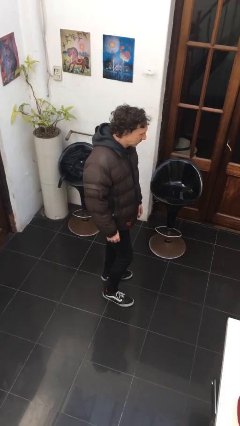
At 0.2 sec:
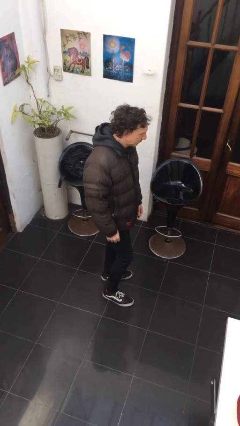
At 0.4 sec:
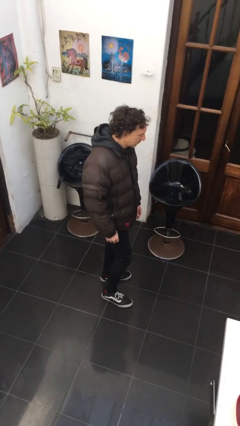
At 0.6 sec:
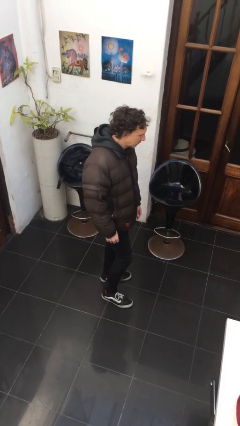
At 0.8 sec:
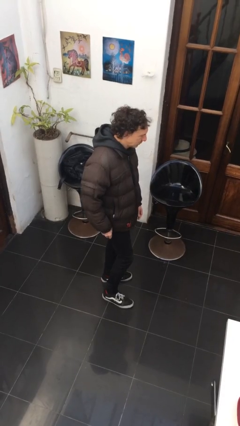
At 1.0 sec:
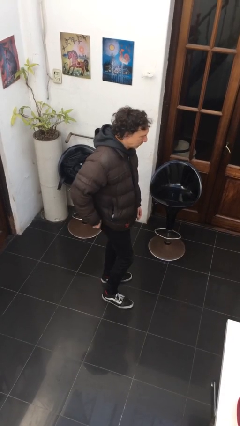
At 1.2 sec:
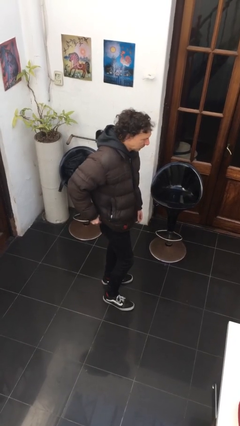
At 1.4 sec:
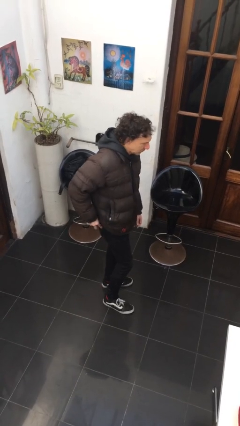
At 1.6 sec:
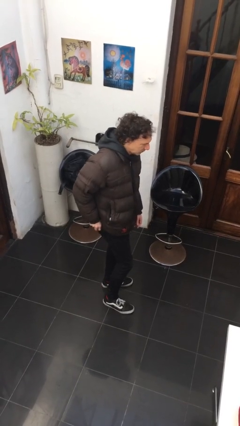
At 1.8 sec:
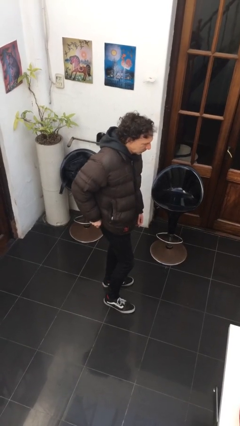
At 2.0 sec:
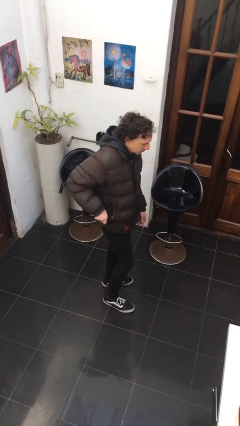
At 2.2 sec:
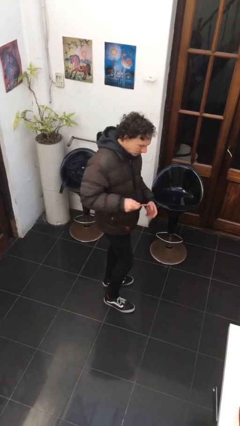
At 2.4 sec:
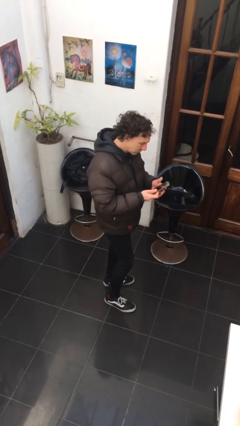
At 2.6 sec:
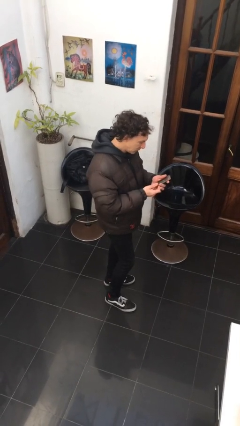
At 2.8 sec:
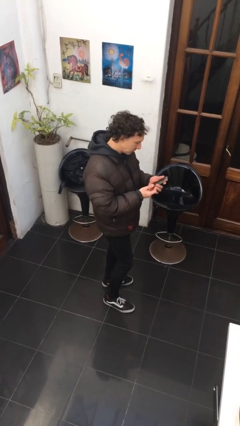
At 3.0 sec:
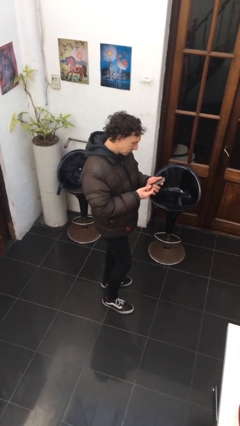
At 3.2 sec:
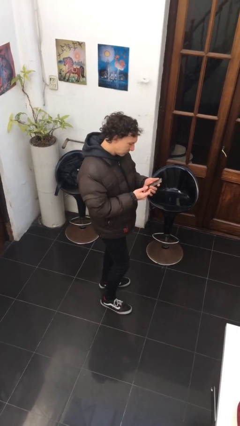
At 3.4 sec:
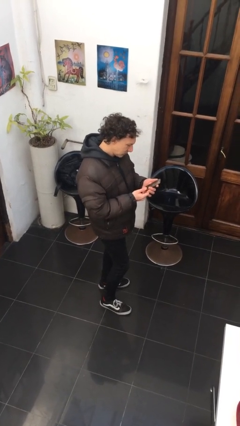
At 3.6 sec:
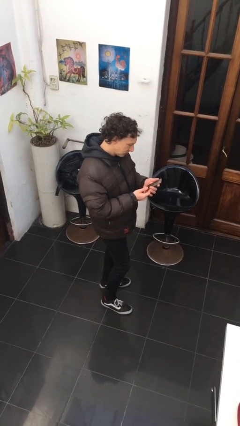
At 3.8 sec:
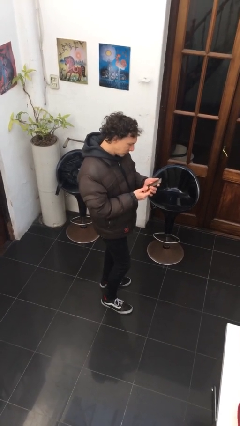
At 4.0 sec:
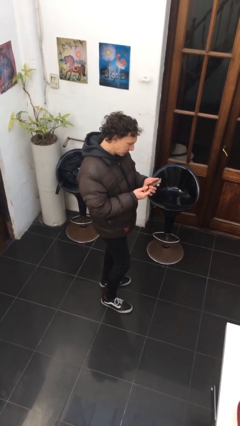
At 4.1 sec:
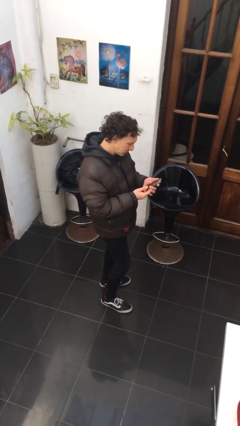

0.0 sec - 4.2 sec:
person takes phone from pocket

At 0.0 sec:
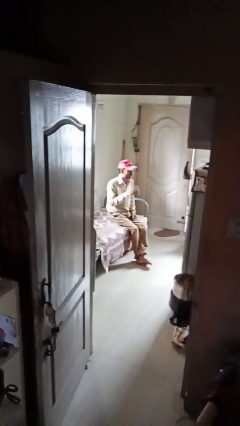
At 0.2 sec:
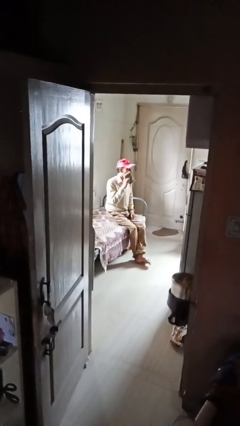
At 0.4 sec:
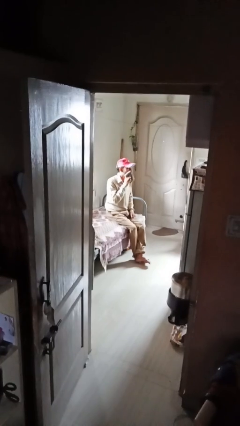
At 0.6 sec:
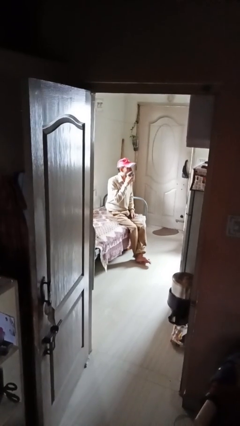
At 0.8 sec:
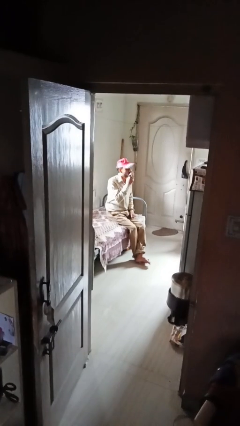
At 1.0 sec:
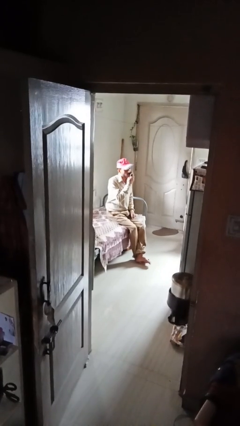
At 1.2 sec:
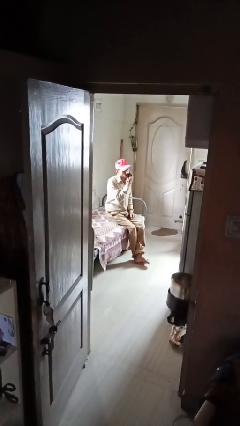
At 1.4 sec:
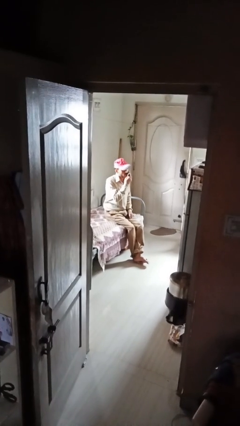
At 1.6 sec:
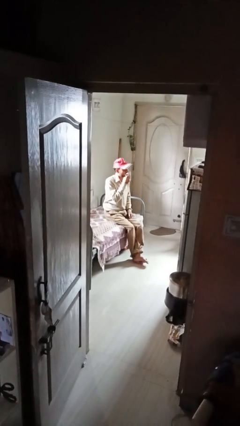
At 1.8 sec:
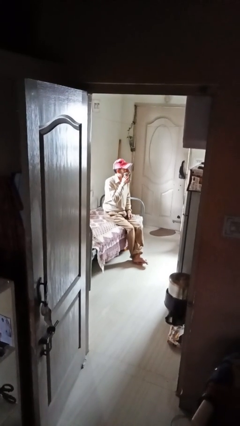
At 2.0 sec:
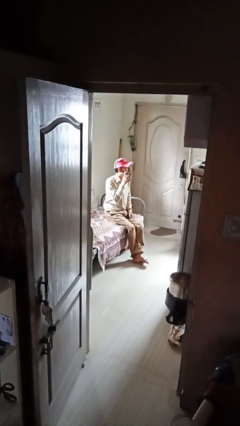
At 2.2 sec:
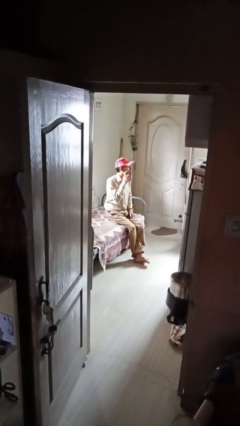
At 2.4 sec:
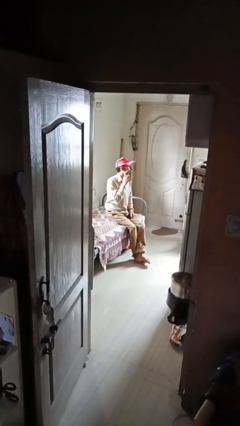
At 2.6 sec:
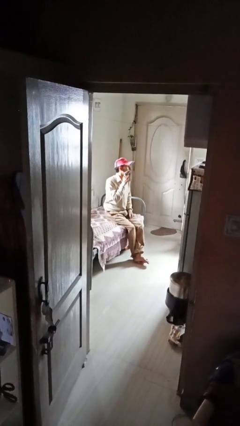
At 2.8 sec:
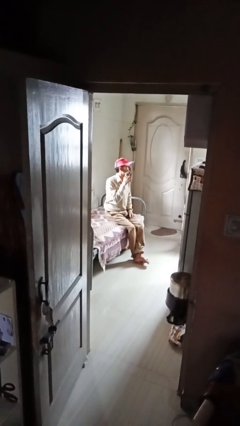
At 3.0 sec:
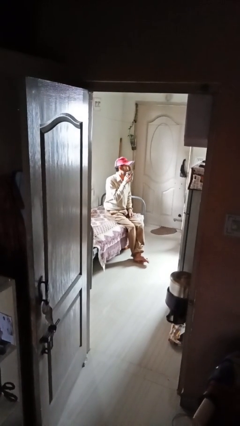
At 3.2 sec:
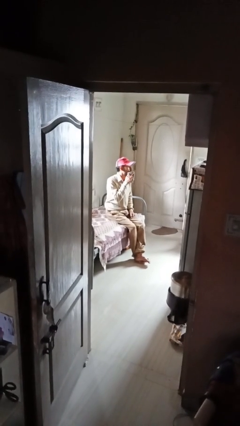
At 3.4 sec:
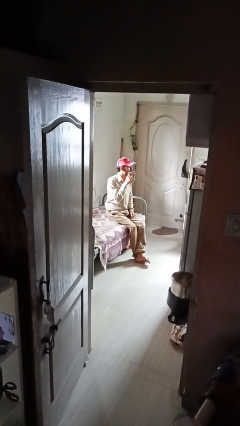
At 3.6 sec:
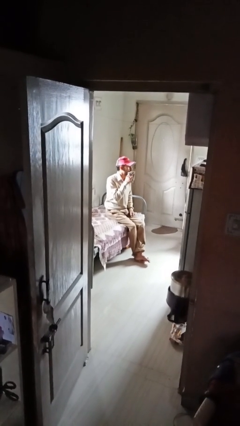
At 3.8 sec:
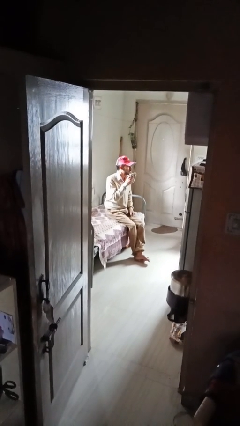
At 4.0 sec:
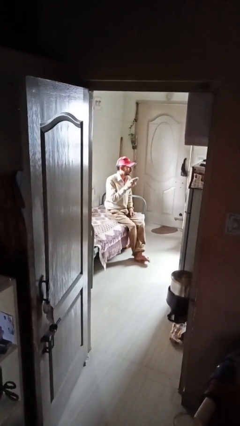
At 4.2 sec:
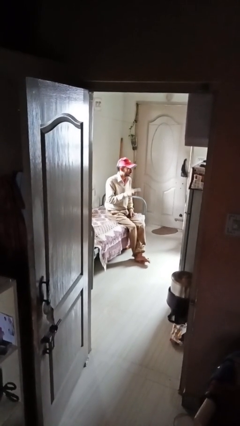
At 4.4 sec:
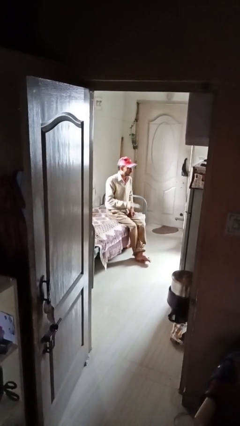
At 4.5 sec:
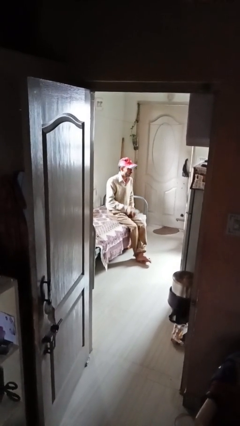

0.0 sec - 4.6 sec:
person wipes mouth with napkin

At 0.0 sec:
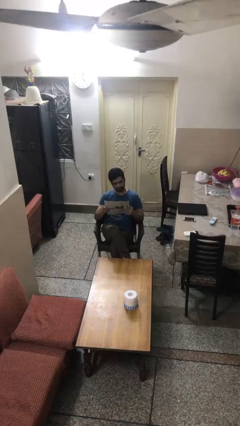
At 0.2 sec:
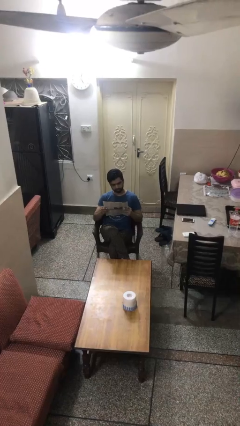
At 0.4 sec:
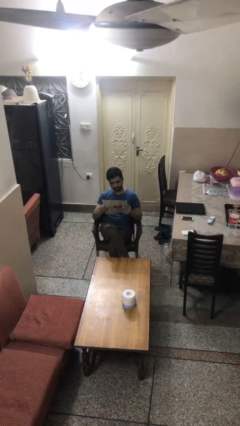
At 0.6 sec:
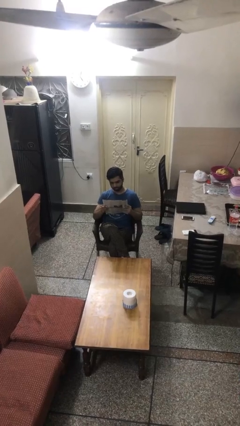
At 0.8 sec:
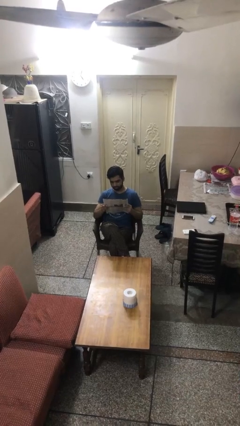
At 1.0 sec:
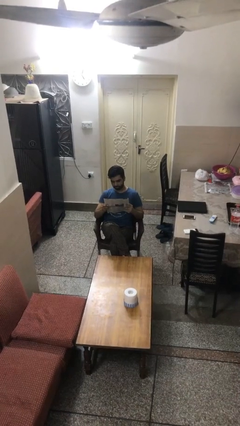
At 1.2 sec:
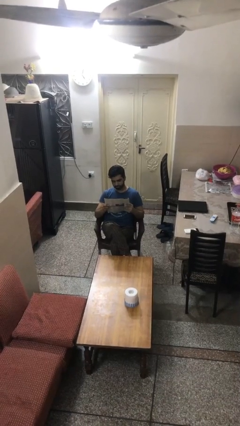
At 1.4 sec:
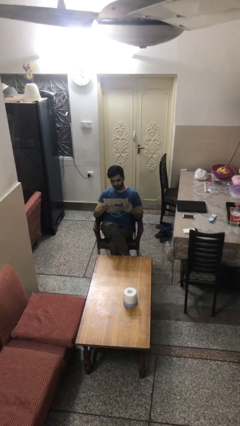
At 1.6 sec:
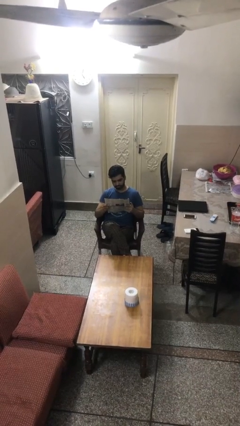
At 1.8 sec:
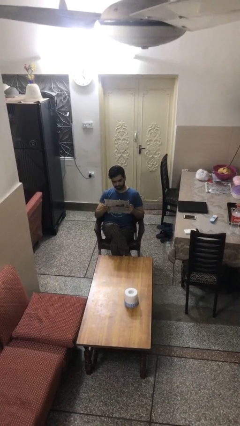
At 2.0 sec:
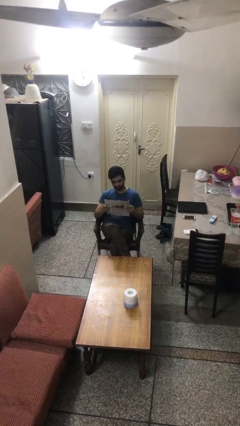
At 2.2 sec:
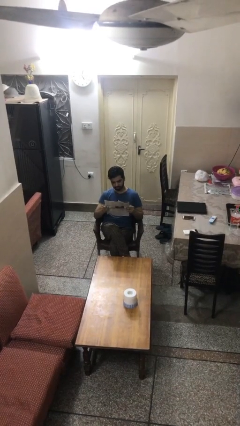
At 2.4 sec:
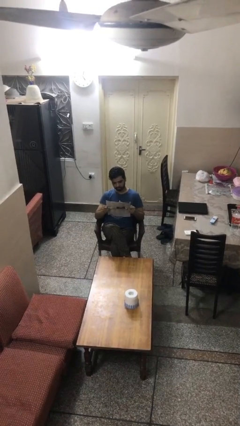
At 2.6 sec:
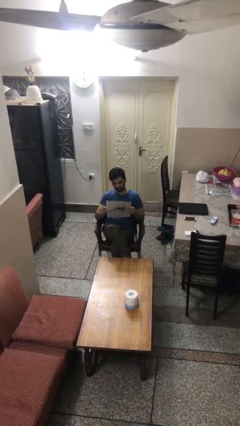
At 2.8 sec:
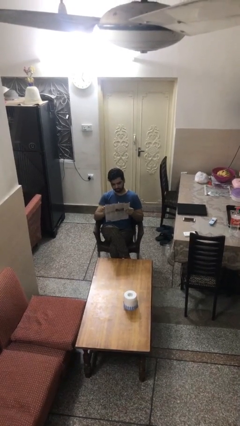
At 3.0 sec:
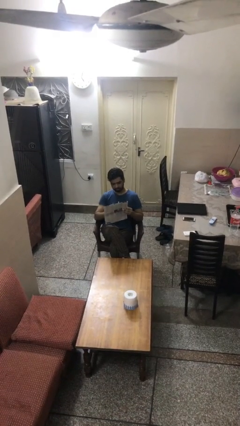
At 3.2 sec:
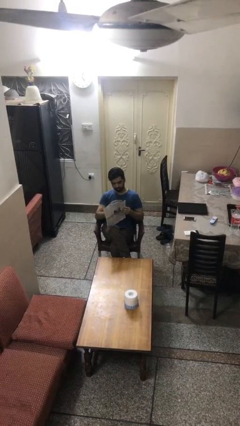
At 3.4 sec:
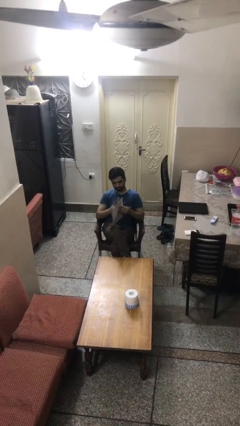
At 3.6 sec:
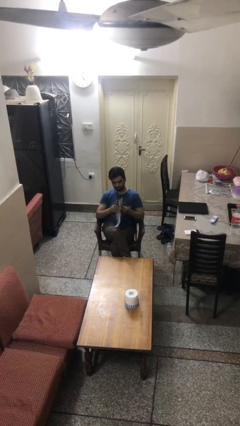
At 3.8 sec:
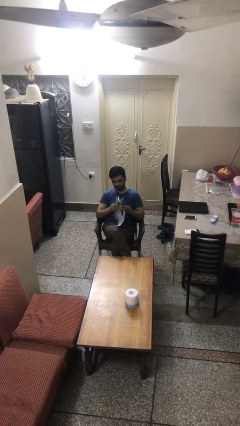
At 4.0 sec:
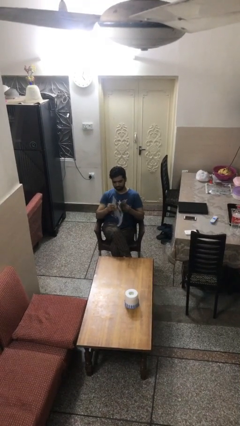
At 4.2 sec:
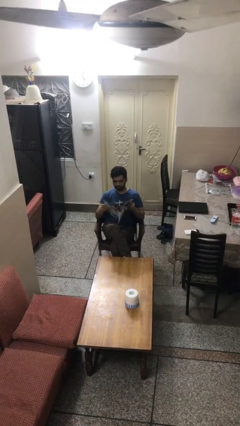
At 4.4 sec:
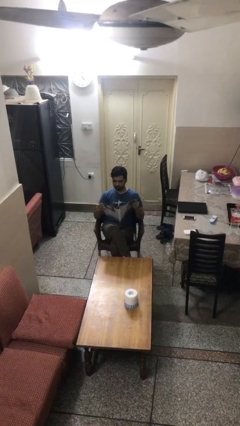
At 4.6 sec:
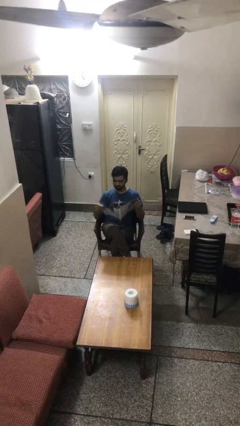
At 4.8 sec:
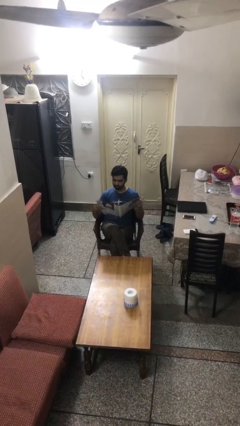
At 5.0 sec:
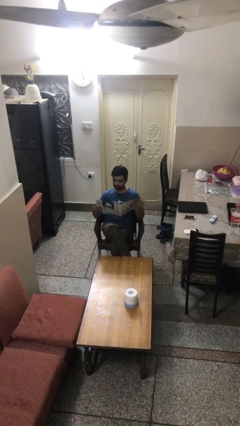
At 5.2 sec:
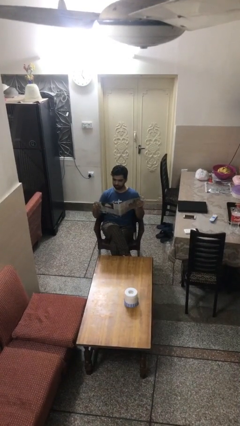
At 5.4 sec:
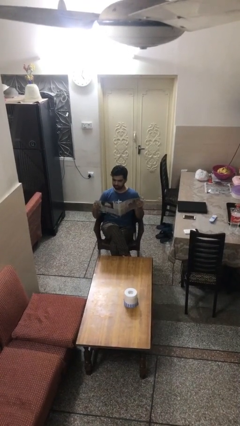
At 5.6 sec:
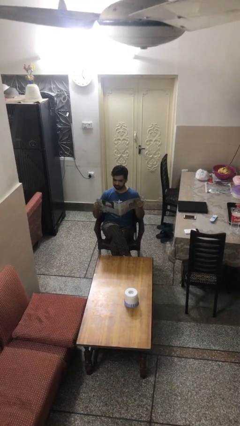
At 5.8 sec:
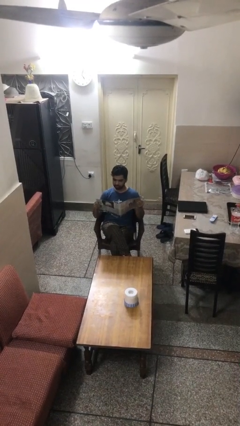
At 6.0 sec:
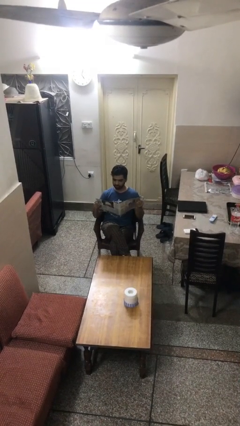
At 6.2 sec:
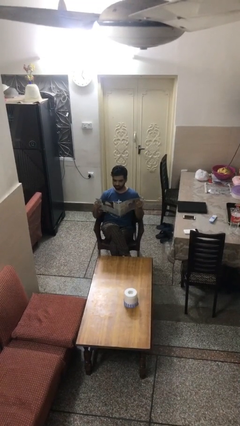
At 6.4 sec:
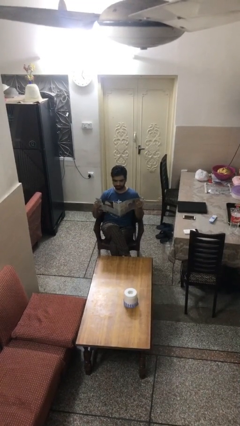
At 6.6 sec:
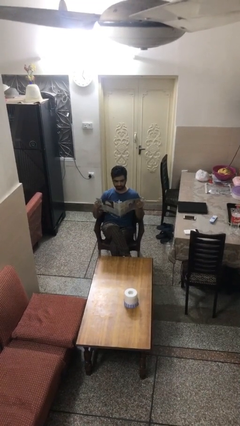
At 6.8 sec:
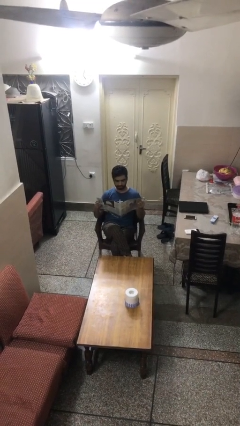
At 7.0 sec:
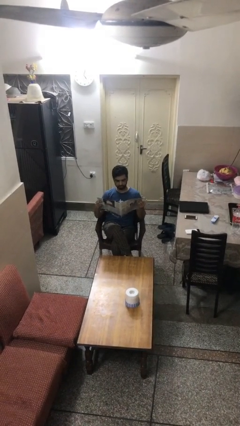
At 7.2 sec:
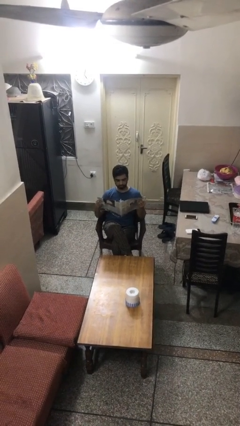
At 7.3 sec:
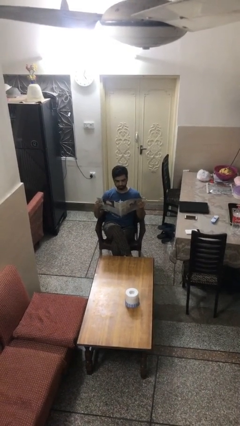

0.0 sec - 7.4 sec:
person reads document

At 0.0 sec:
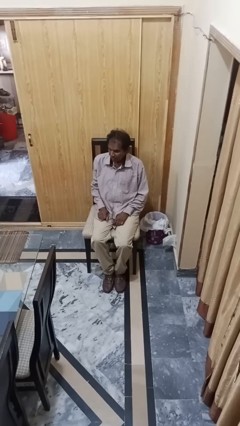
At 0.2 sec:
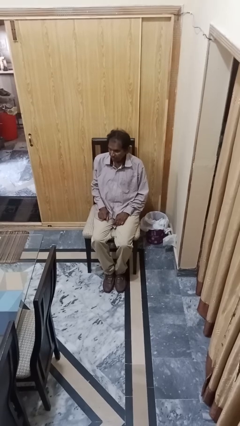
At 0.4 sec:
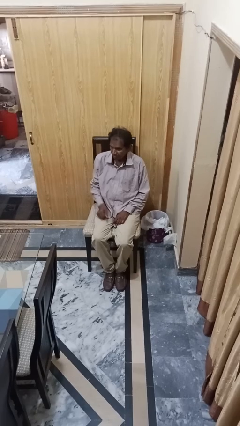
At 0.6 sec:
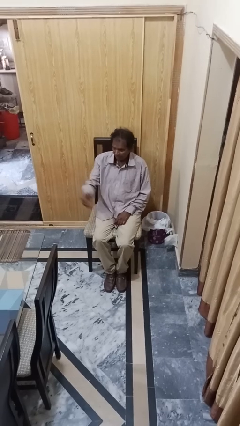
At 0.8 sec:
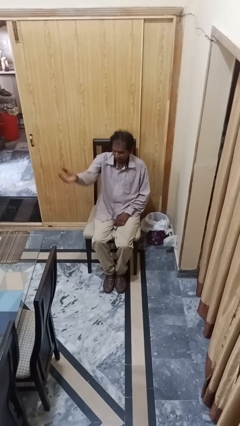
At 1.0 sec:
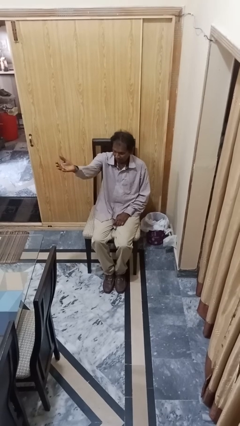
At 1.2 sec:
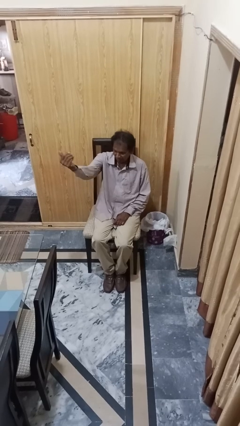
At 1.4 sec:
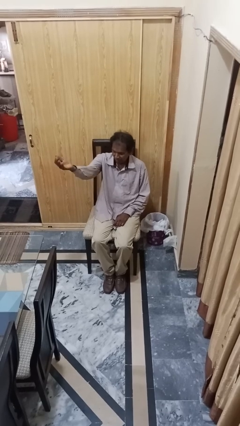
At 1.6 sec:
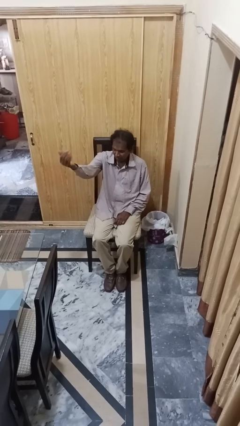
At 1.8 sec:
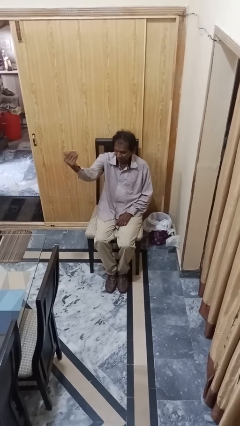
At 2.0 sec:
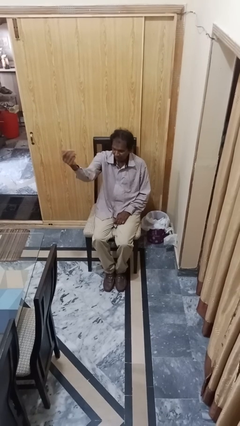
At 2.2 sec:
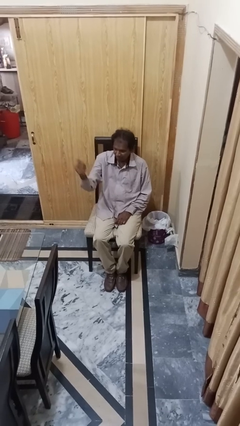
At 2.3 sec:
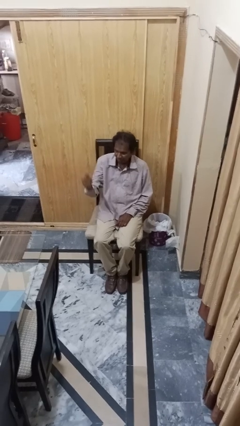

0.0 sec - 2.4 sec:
person gestures come here
